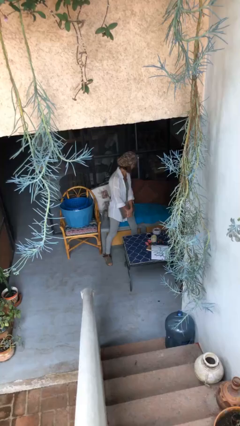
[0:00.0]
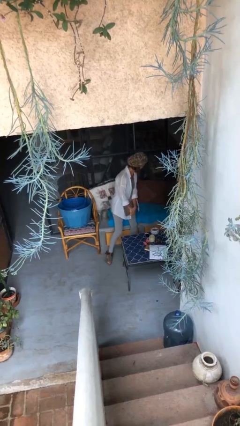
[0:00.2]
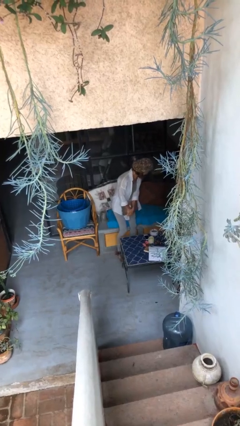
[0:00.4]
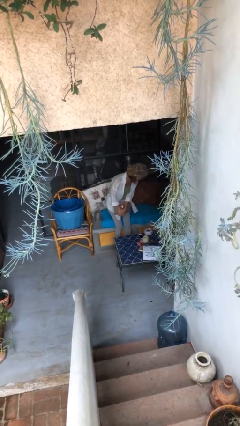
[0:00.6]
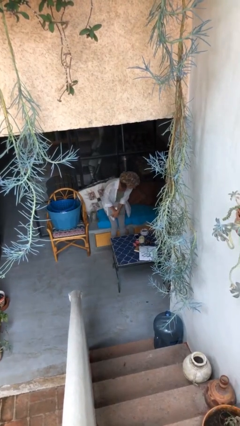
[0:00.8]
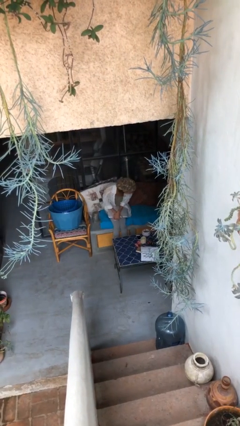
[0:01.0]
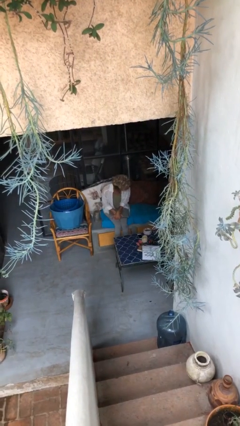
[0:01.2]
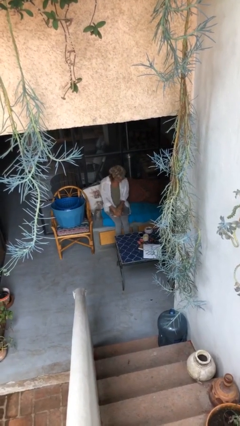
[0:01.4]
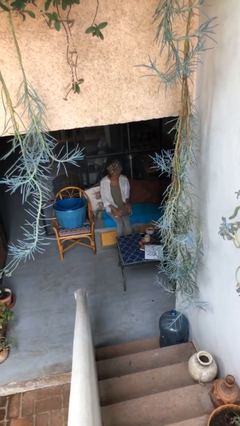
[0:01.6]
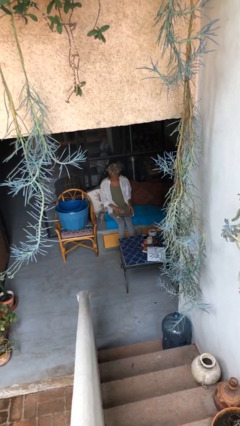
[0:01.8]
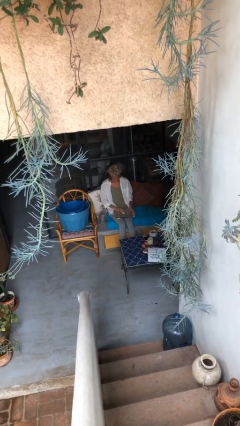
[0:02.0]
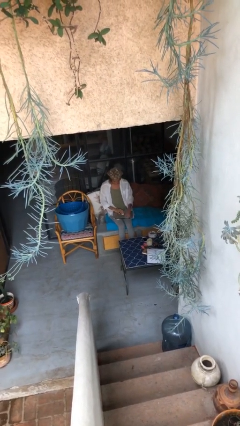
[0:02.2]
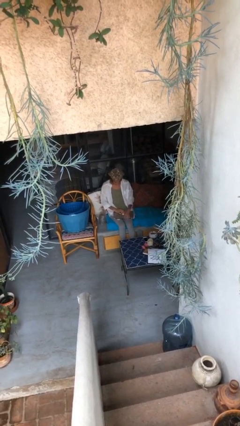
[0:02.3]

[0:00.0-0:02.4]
person sits down

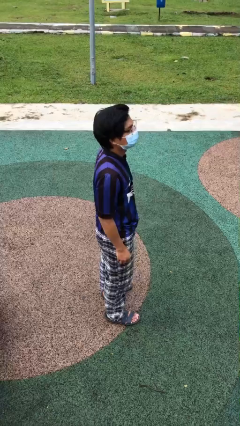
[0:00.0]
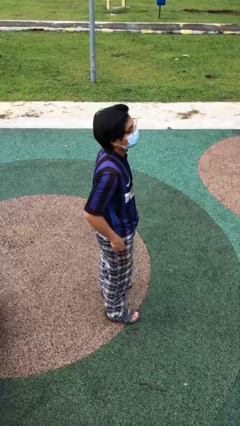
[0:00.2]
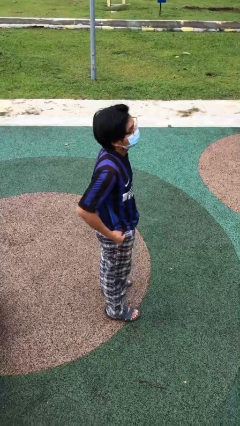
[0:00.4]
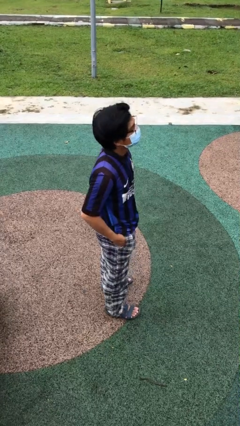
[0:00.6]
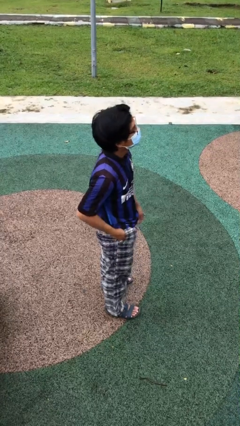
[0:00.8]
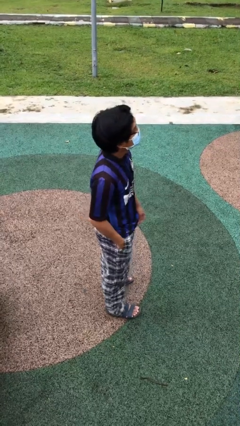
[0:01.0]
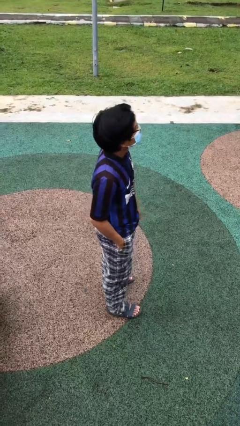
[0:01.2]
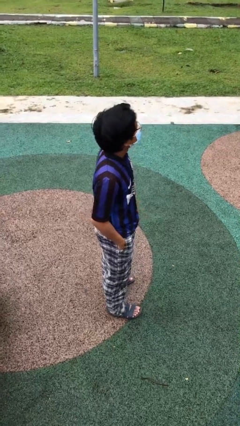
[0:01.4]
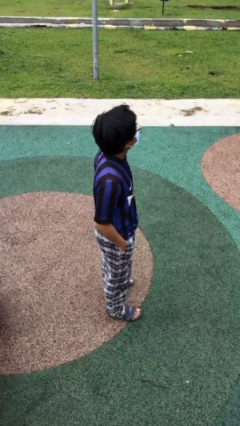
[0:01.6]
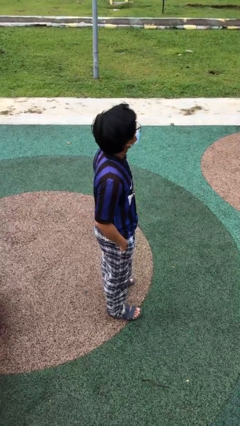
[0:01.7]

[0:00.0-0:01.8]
person puts hands in back pockets

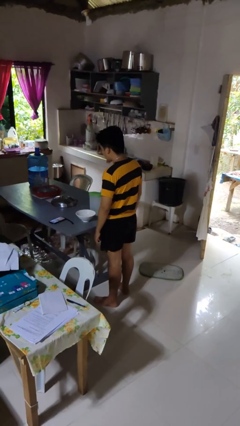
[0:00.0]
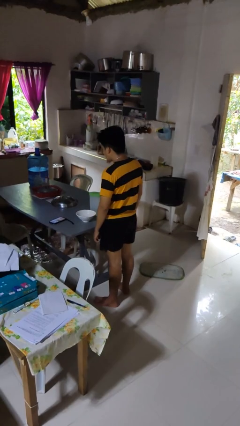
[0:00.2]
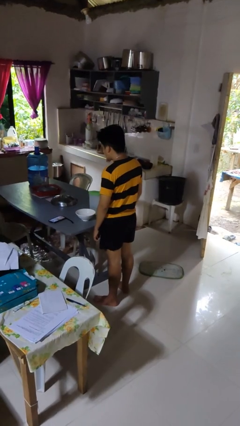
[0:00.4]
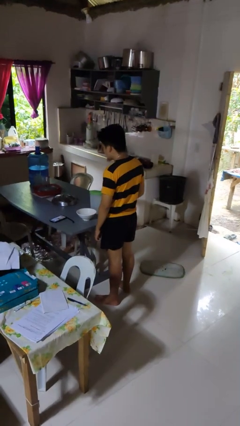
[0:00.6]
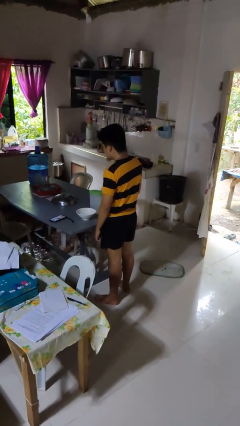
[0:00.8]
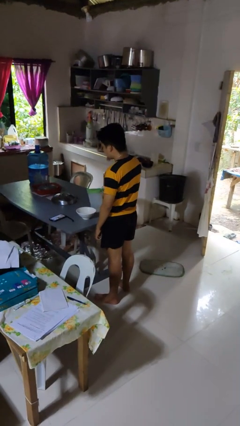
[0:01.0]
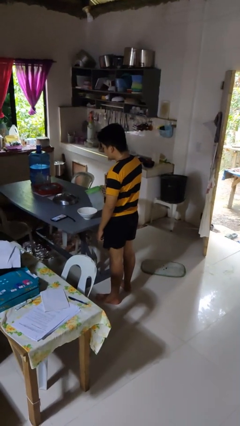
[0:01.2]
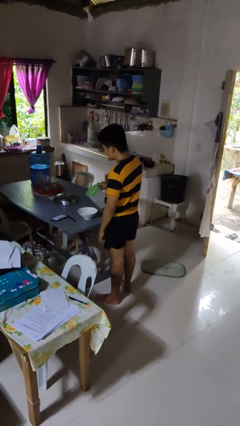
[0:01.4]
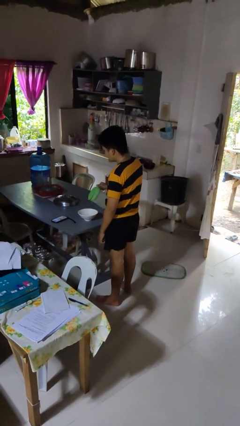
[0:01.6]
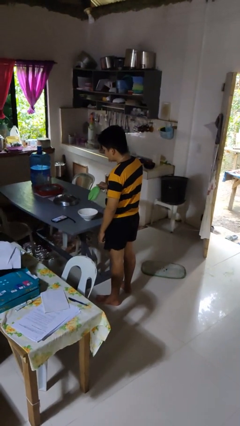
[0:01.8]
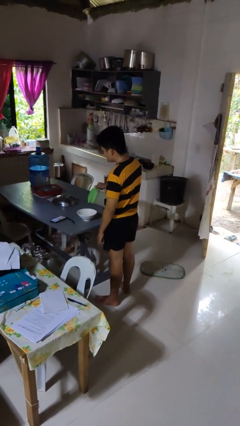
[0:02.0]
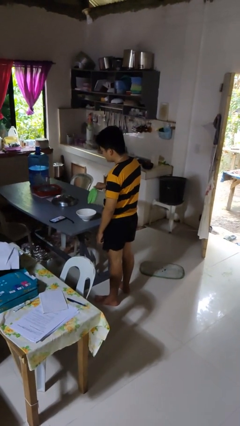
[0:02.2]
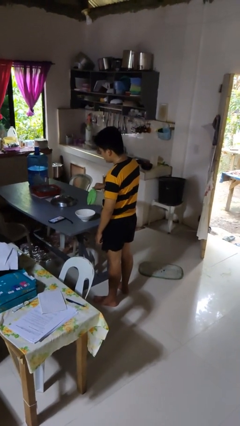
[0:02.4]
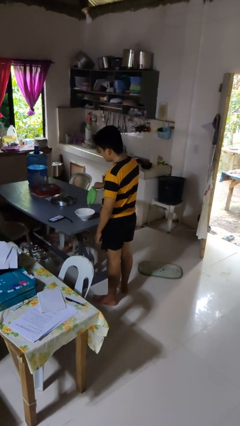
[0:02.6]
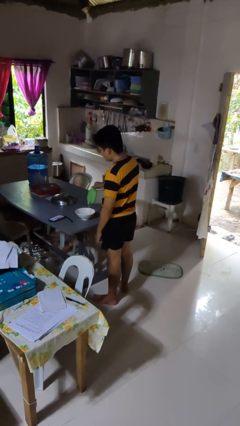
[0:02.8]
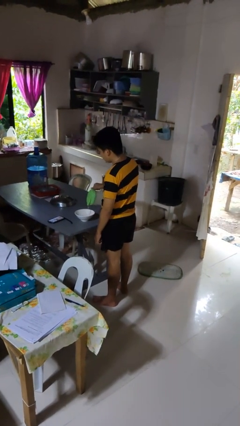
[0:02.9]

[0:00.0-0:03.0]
person pours into bowl

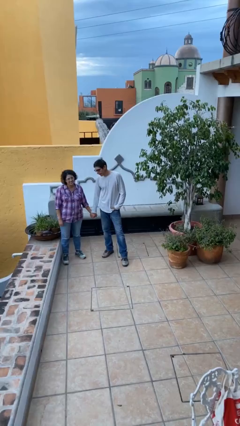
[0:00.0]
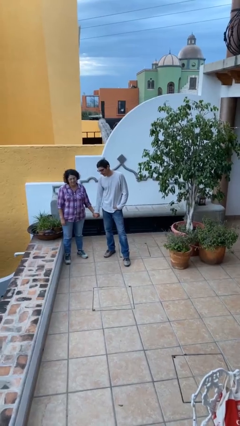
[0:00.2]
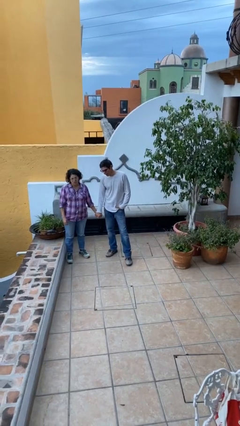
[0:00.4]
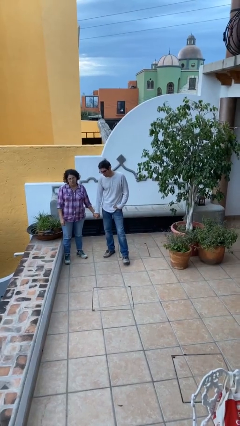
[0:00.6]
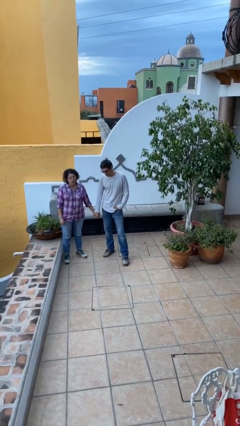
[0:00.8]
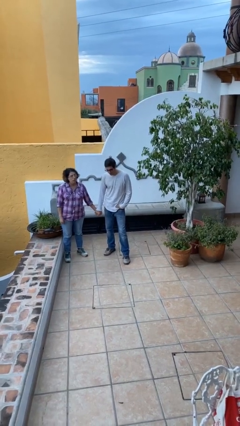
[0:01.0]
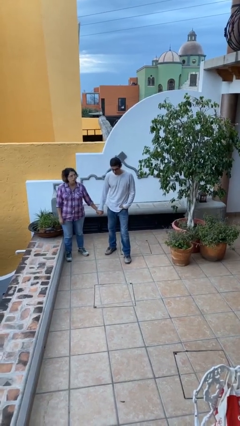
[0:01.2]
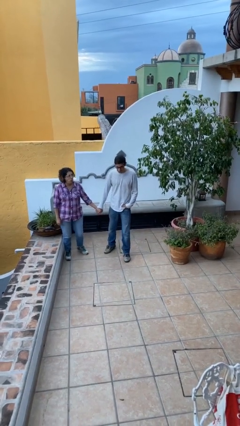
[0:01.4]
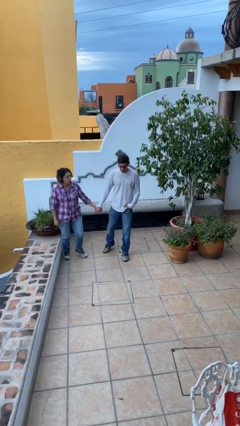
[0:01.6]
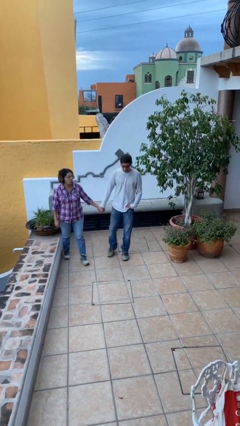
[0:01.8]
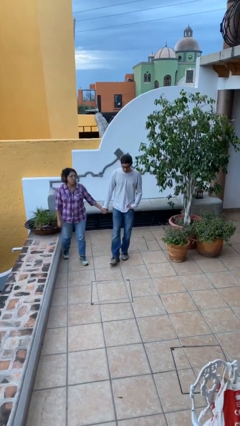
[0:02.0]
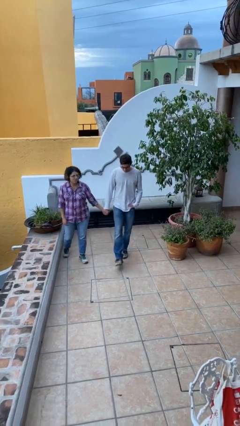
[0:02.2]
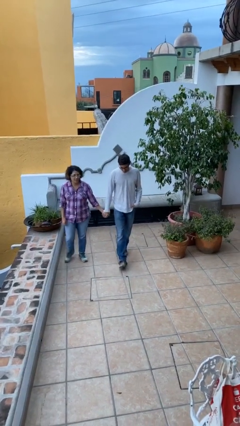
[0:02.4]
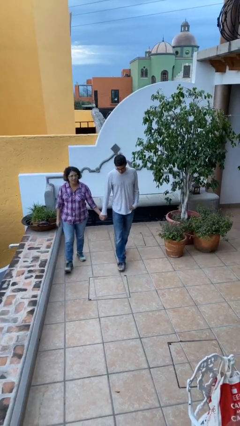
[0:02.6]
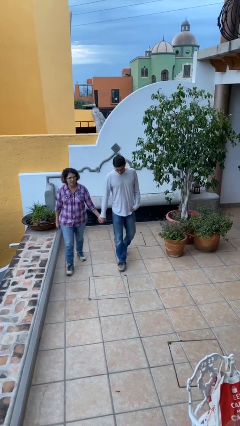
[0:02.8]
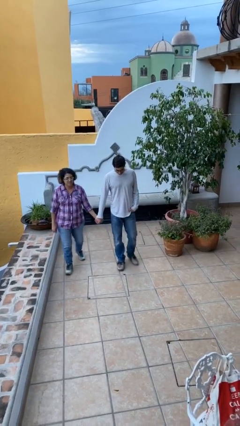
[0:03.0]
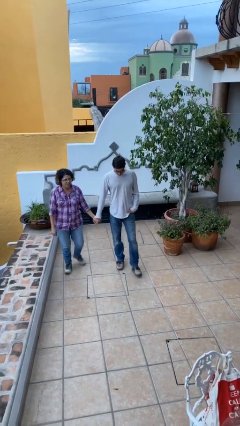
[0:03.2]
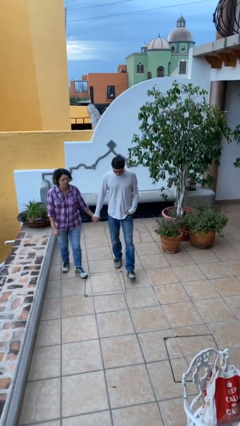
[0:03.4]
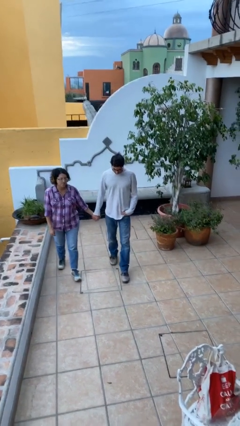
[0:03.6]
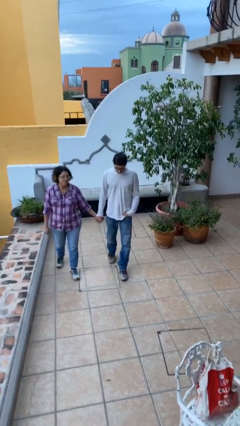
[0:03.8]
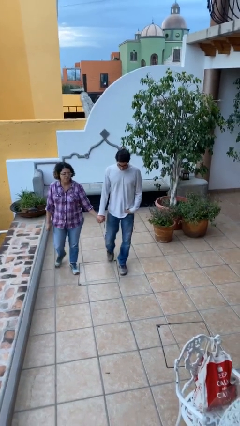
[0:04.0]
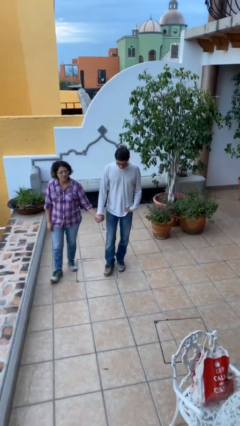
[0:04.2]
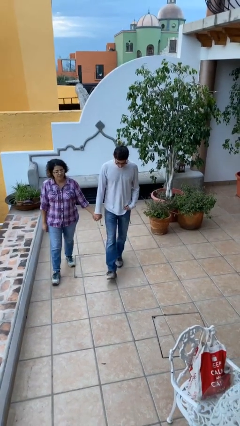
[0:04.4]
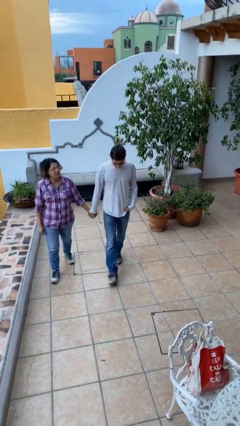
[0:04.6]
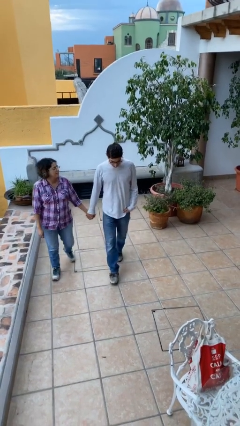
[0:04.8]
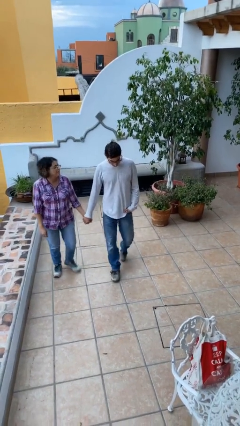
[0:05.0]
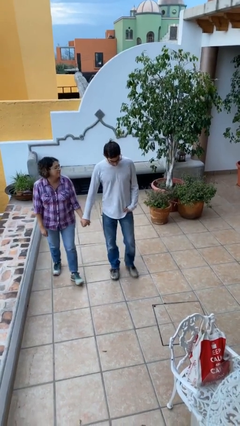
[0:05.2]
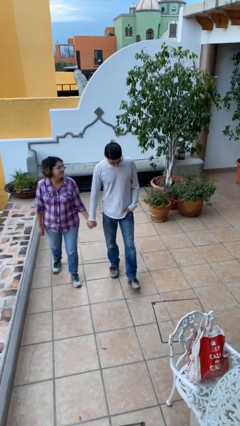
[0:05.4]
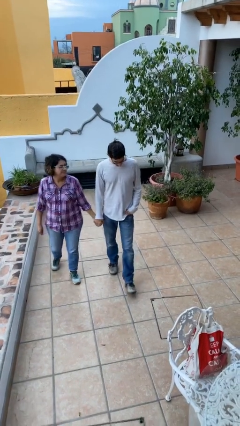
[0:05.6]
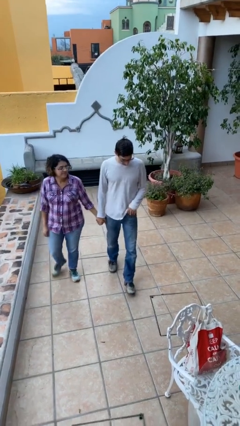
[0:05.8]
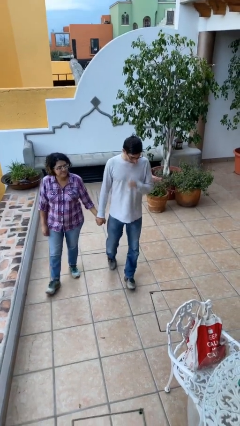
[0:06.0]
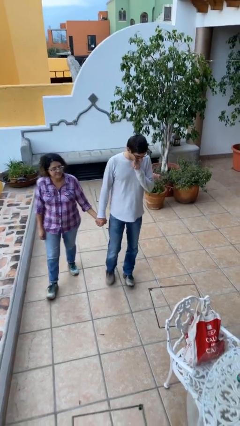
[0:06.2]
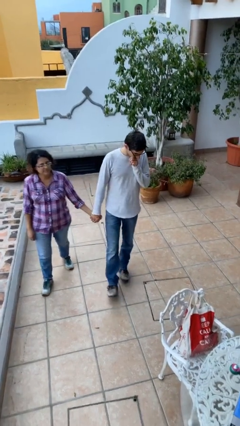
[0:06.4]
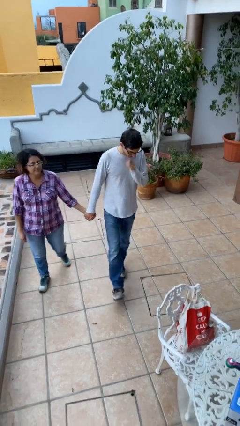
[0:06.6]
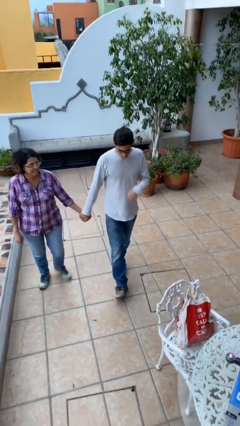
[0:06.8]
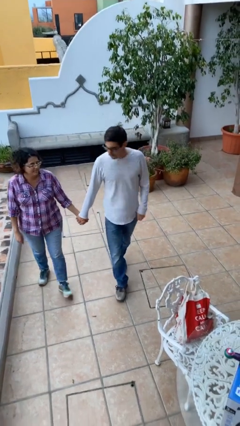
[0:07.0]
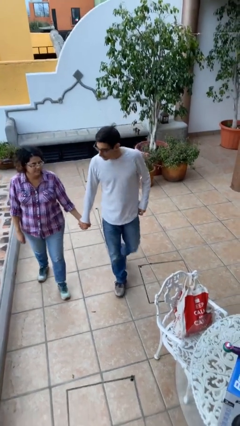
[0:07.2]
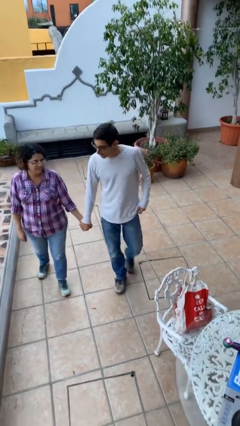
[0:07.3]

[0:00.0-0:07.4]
person holds hand

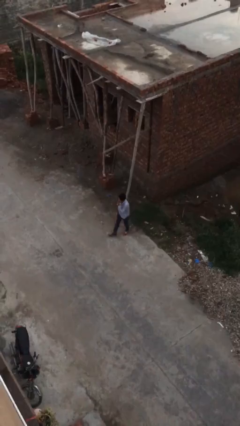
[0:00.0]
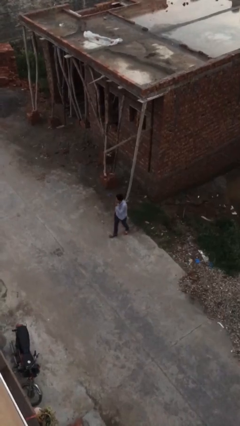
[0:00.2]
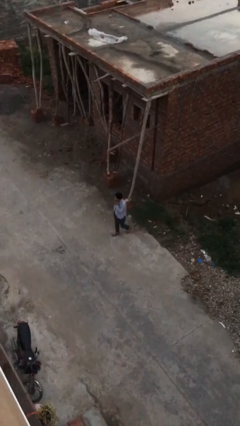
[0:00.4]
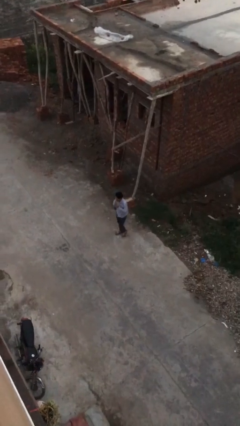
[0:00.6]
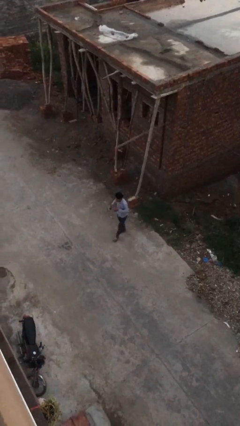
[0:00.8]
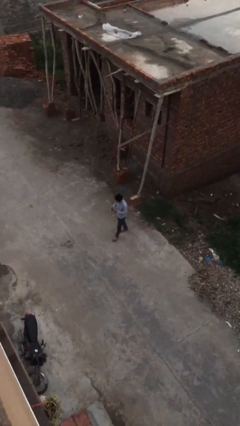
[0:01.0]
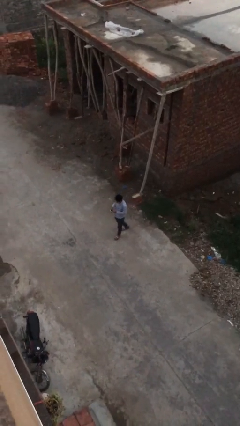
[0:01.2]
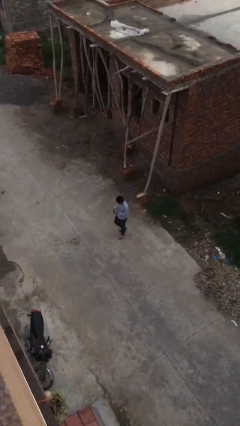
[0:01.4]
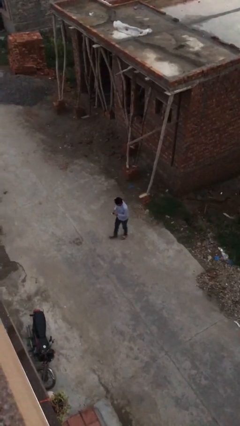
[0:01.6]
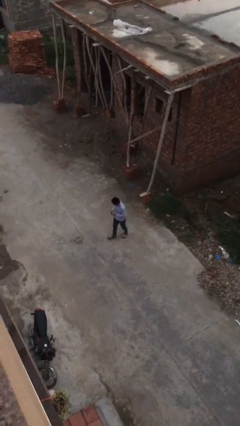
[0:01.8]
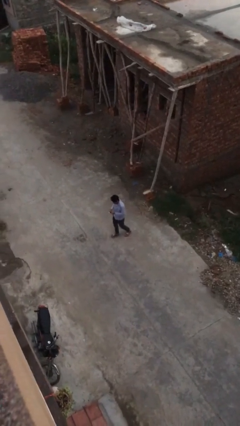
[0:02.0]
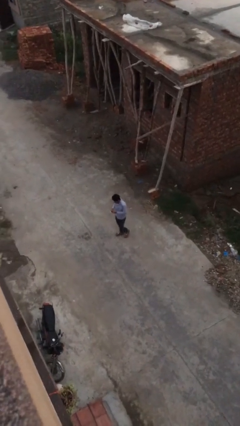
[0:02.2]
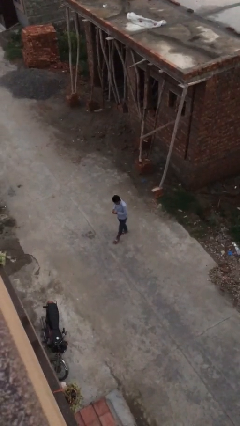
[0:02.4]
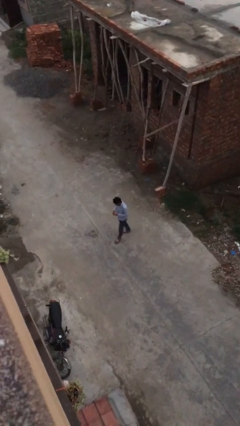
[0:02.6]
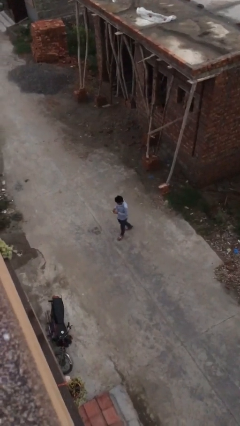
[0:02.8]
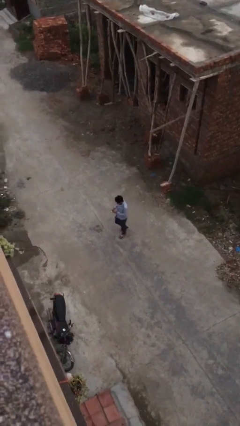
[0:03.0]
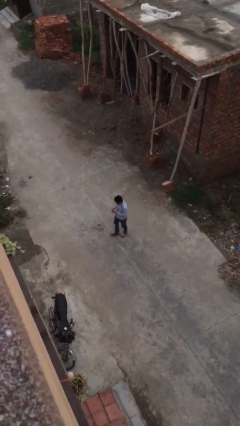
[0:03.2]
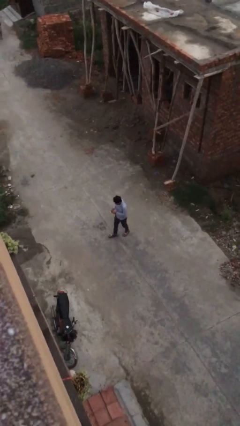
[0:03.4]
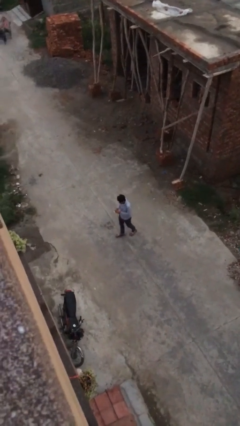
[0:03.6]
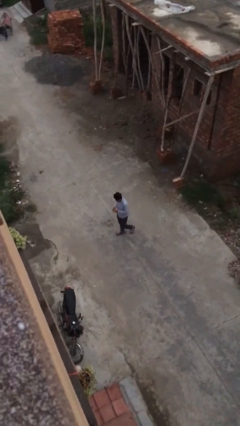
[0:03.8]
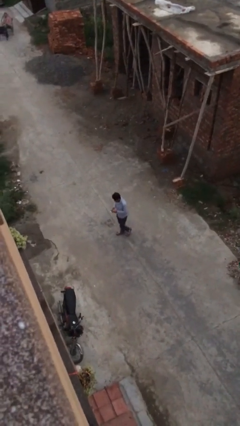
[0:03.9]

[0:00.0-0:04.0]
person texts on phone
